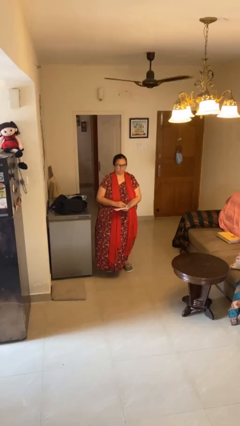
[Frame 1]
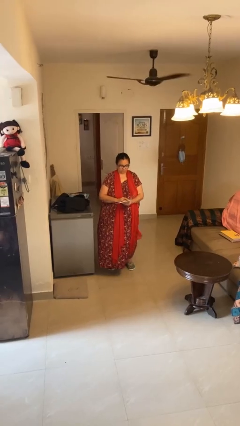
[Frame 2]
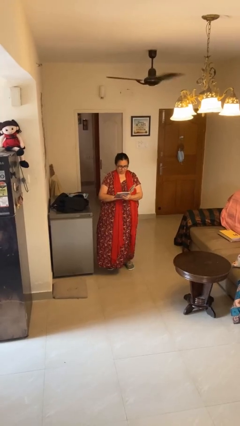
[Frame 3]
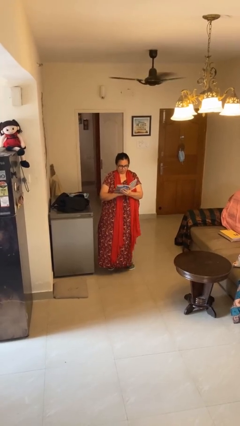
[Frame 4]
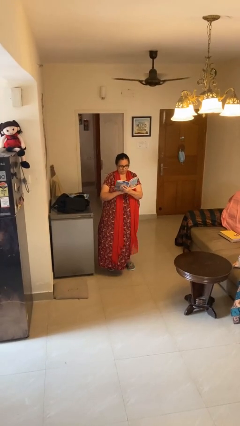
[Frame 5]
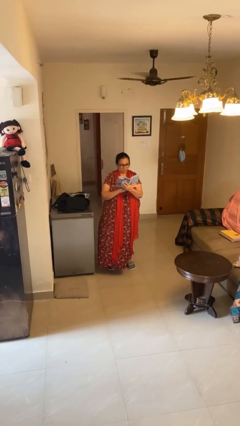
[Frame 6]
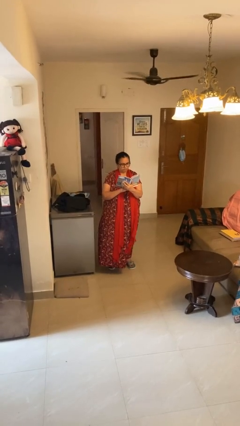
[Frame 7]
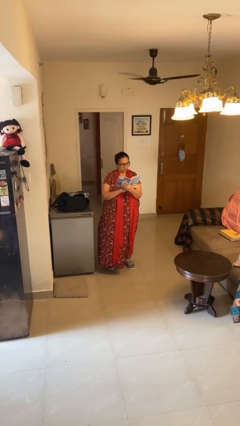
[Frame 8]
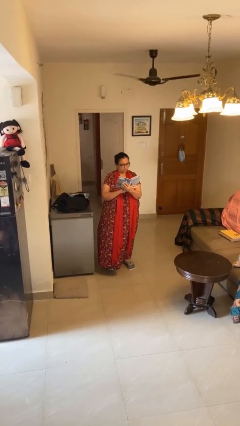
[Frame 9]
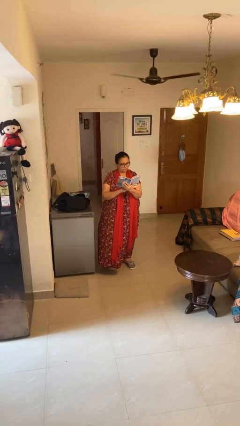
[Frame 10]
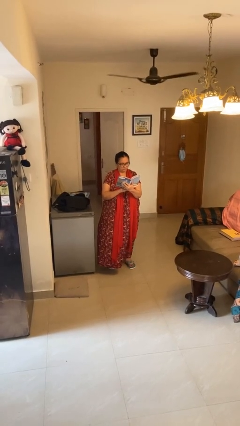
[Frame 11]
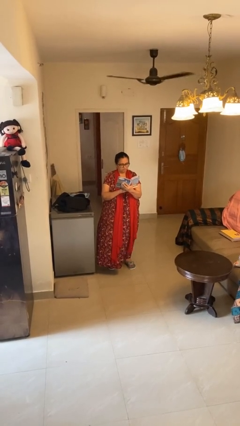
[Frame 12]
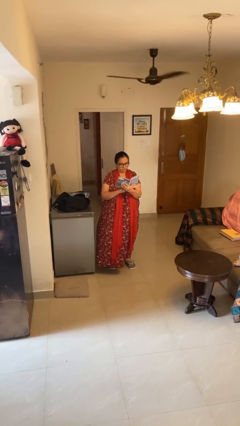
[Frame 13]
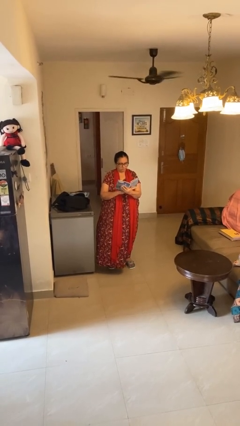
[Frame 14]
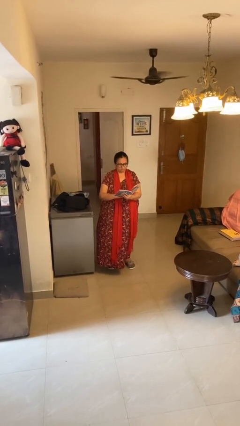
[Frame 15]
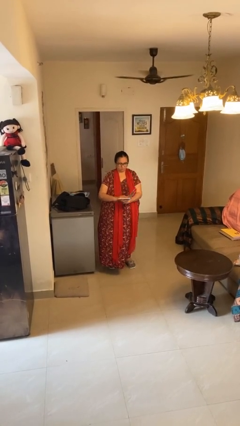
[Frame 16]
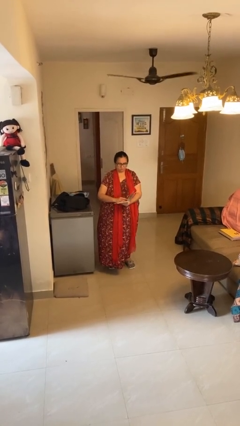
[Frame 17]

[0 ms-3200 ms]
person reads document

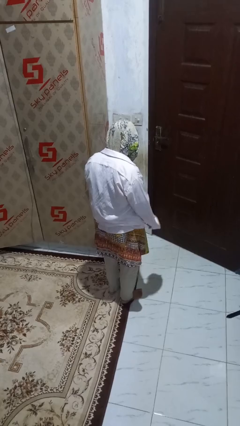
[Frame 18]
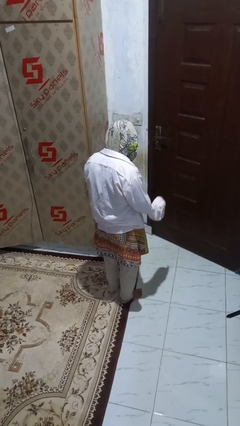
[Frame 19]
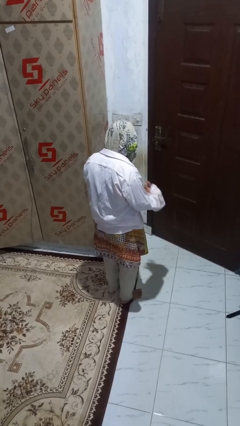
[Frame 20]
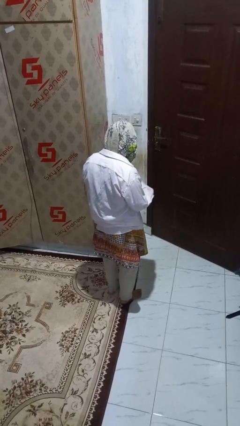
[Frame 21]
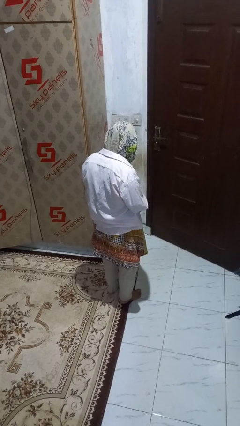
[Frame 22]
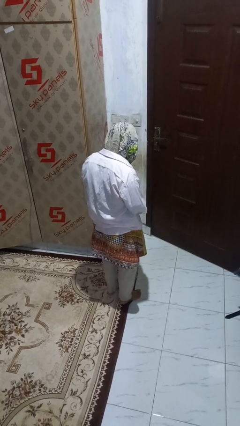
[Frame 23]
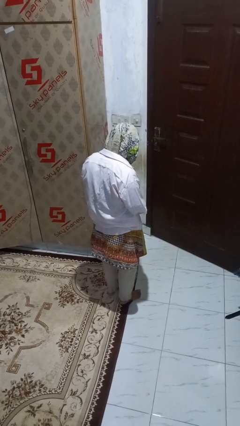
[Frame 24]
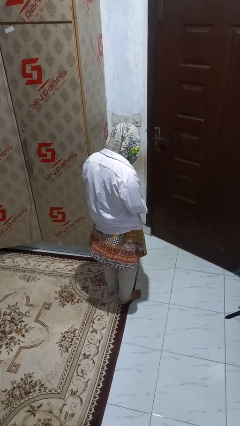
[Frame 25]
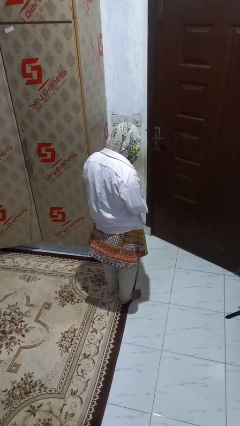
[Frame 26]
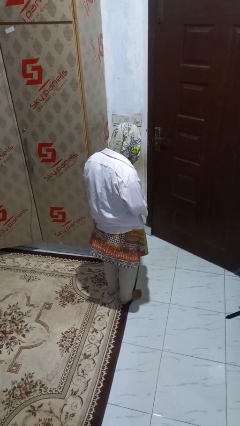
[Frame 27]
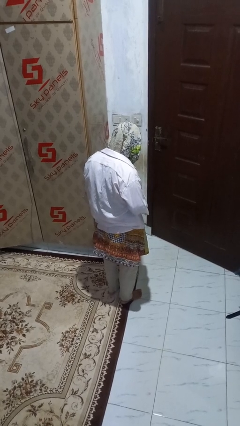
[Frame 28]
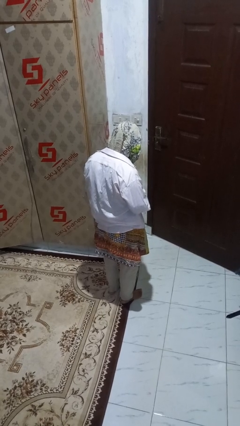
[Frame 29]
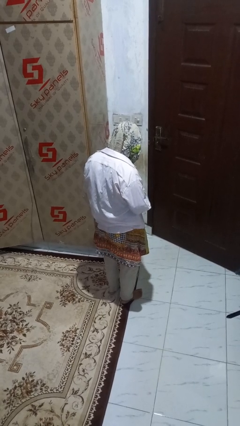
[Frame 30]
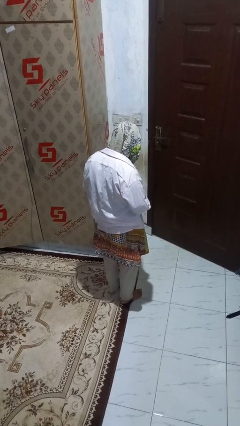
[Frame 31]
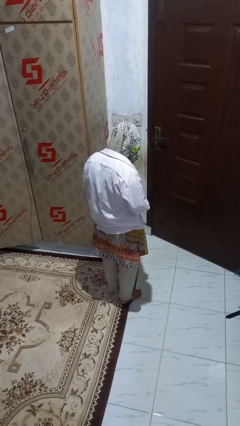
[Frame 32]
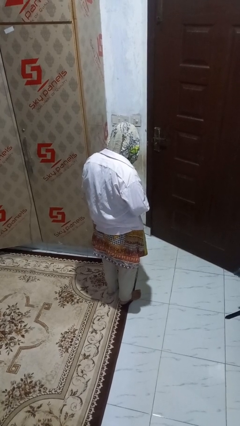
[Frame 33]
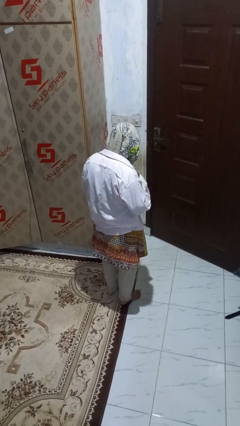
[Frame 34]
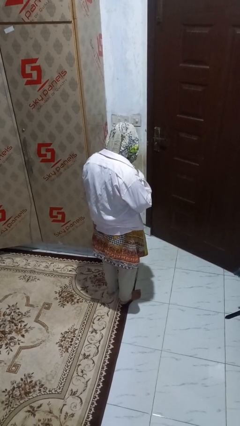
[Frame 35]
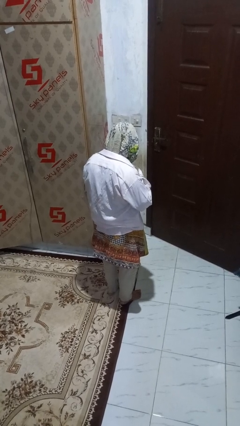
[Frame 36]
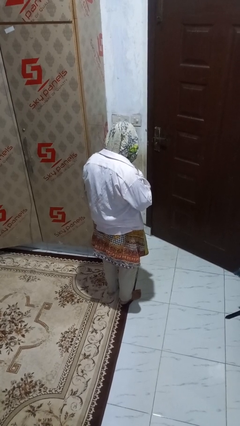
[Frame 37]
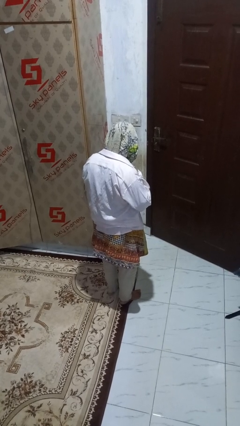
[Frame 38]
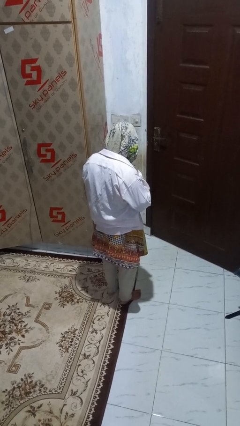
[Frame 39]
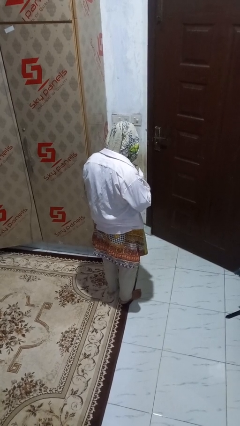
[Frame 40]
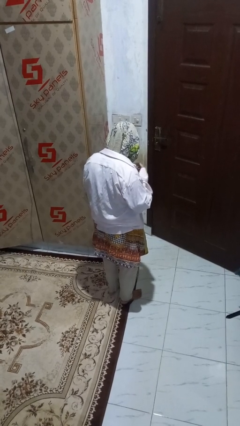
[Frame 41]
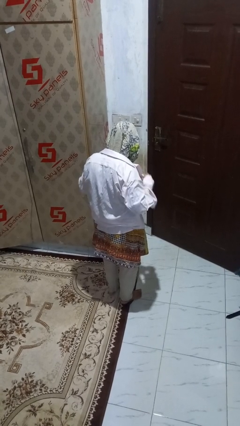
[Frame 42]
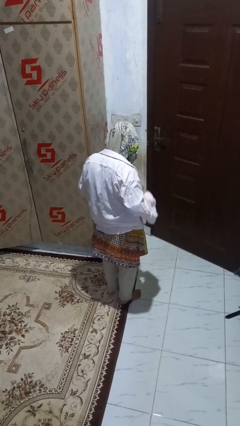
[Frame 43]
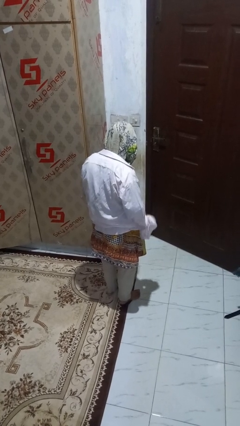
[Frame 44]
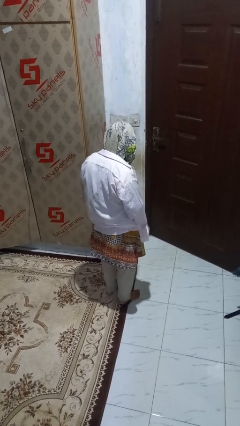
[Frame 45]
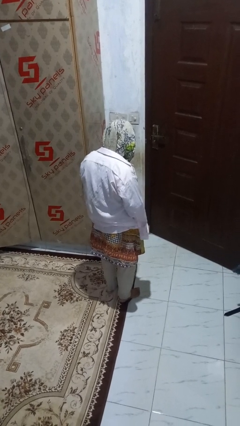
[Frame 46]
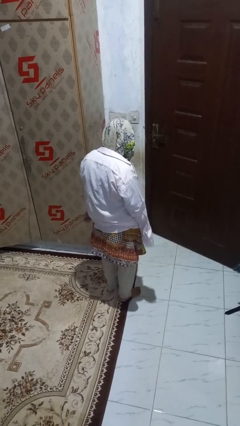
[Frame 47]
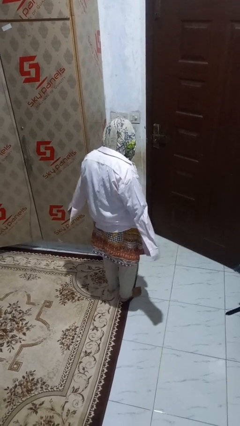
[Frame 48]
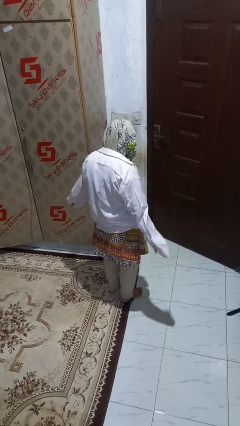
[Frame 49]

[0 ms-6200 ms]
person unbuttons shirt

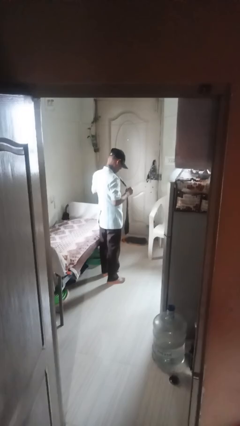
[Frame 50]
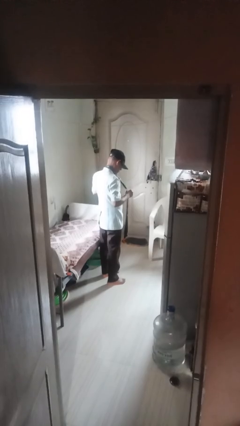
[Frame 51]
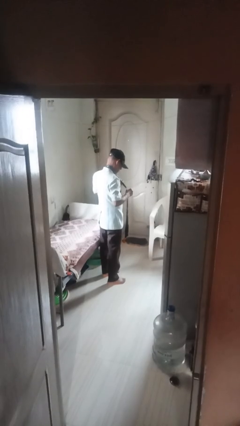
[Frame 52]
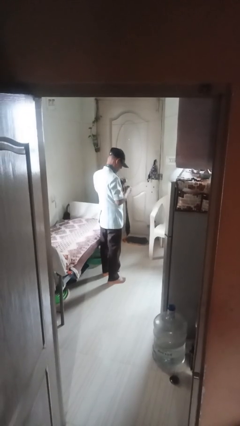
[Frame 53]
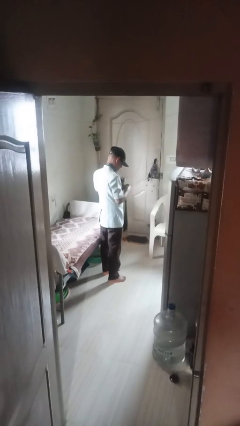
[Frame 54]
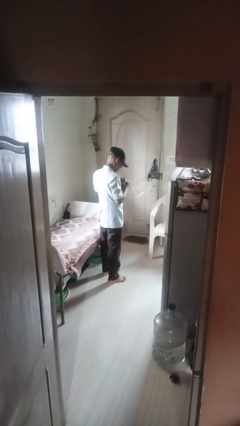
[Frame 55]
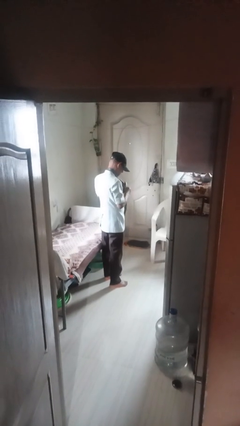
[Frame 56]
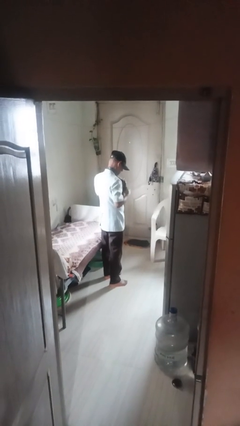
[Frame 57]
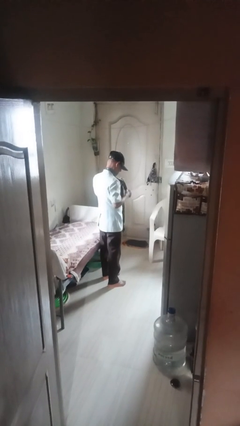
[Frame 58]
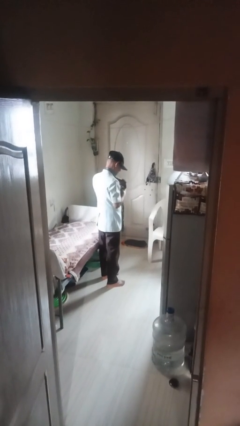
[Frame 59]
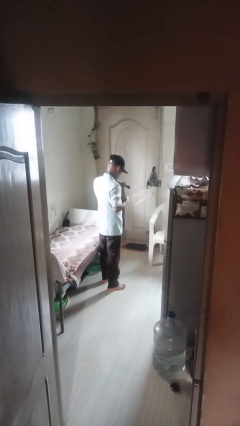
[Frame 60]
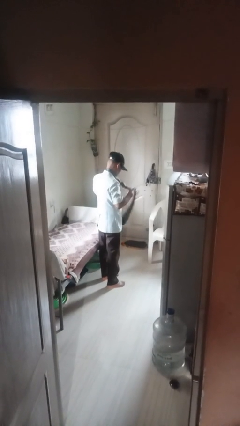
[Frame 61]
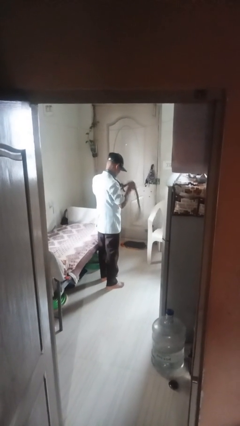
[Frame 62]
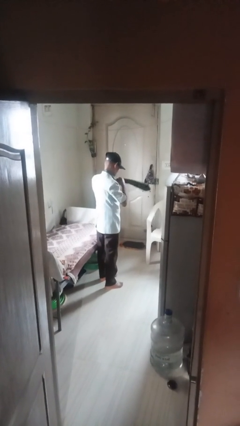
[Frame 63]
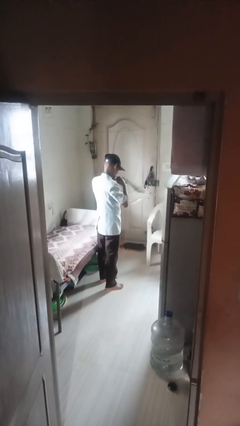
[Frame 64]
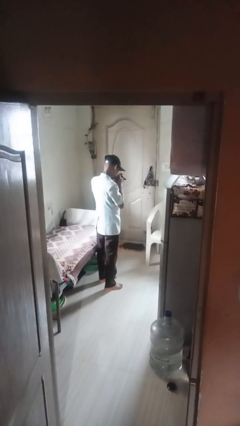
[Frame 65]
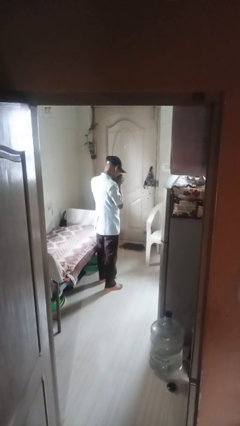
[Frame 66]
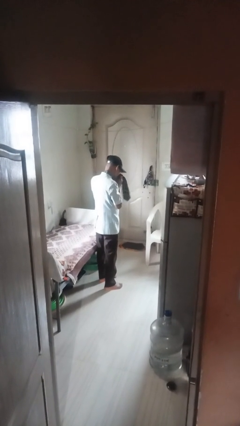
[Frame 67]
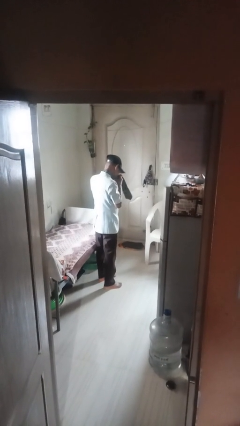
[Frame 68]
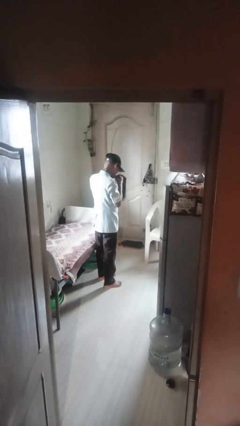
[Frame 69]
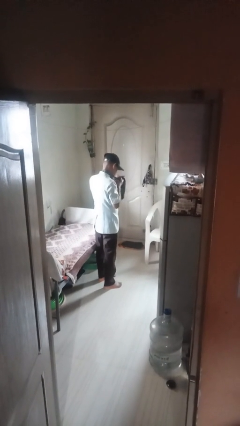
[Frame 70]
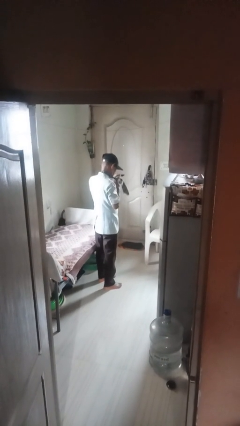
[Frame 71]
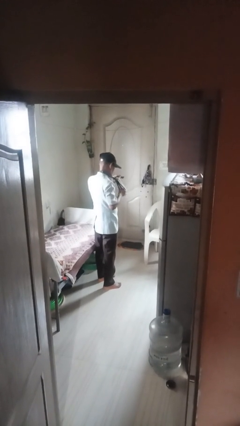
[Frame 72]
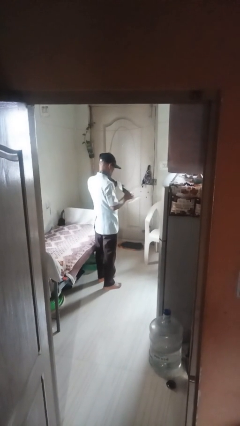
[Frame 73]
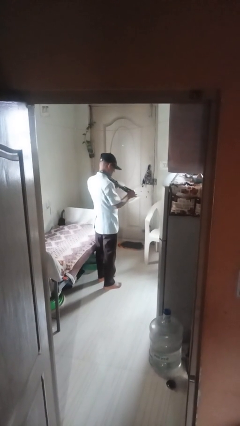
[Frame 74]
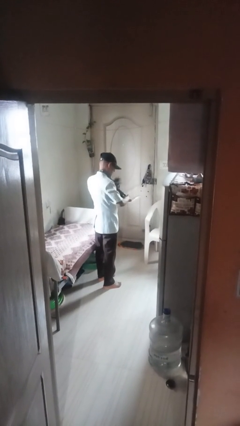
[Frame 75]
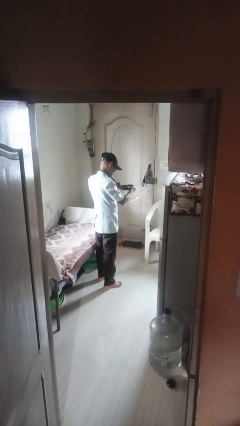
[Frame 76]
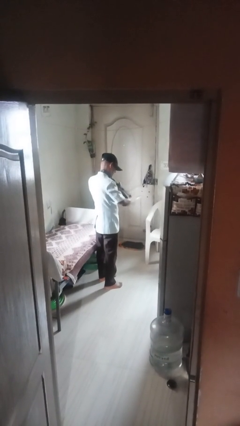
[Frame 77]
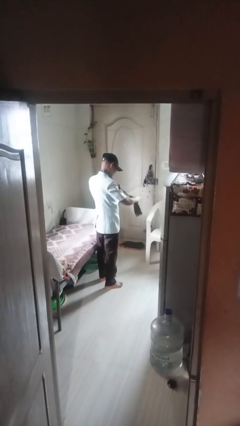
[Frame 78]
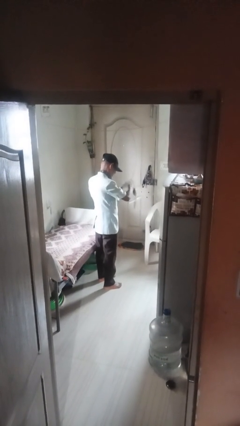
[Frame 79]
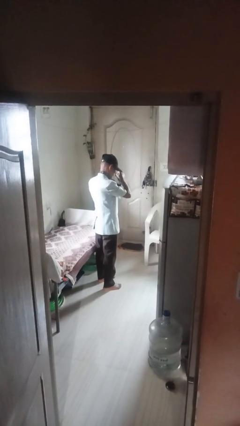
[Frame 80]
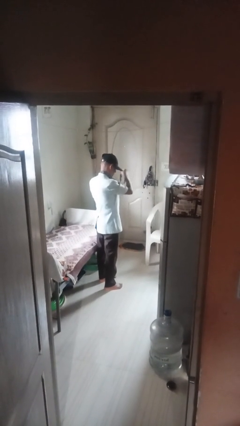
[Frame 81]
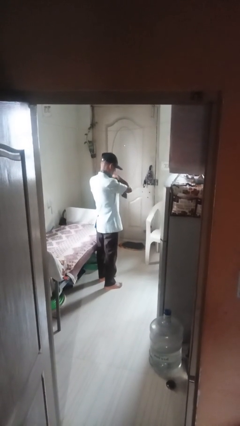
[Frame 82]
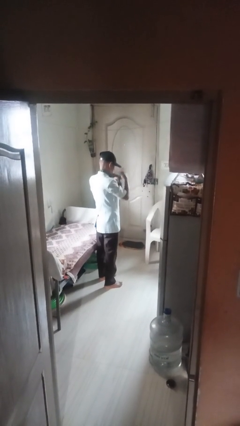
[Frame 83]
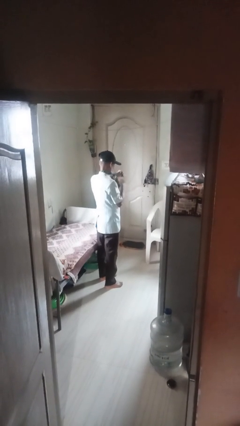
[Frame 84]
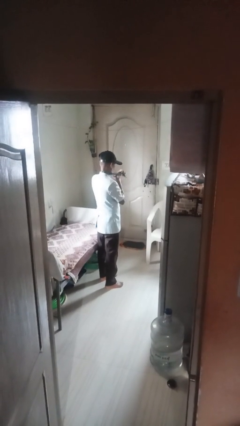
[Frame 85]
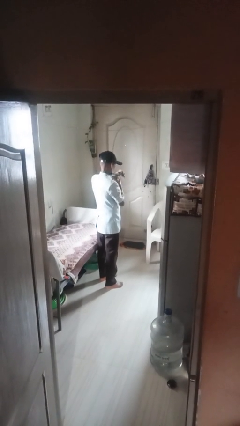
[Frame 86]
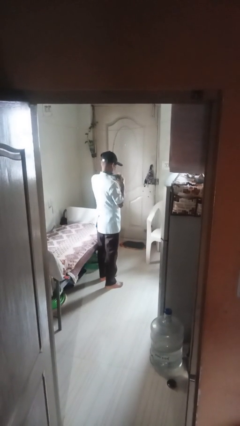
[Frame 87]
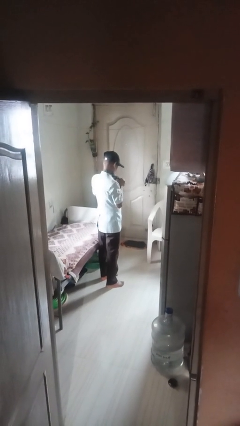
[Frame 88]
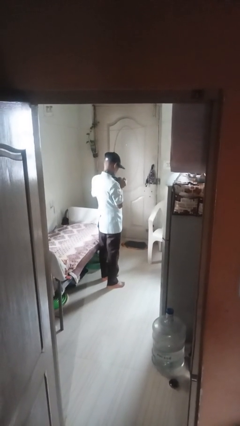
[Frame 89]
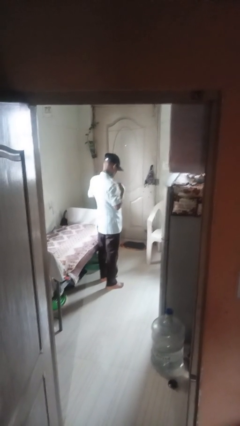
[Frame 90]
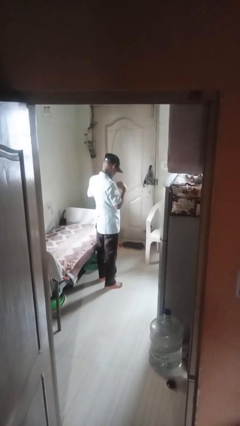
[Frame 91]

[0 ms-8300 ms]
person puts on necktie

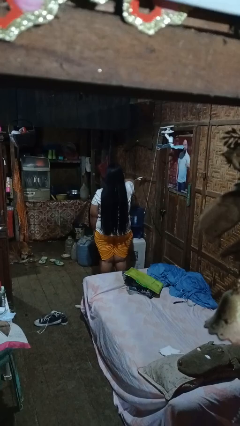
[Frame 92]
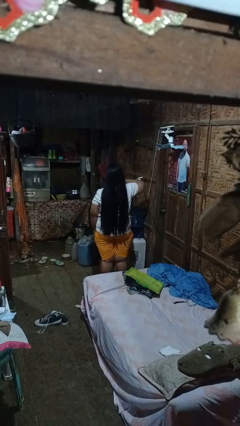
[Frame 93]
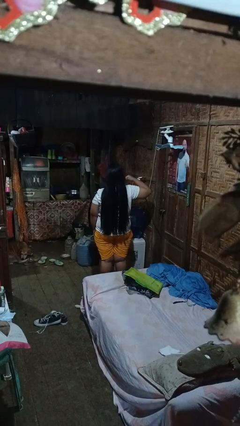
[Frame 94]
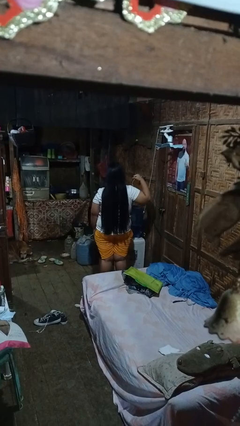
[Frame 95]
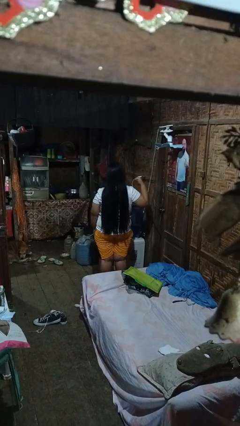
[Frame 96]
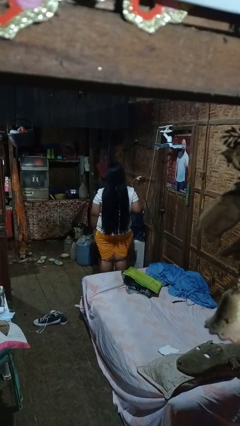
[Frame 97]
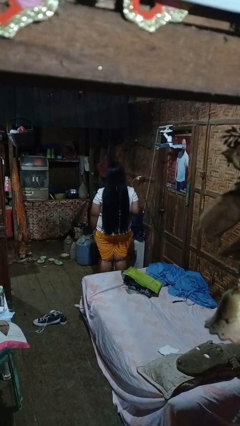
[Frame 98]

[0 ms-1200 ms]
person gestures cut
